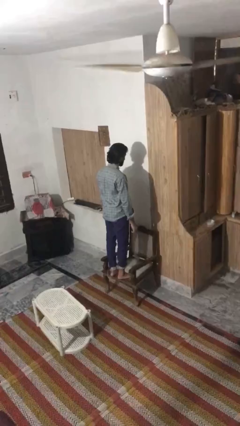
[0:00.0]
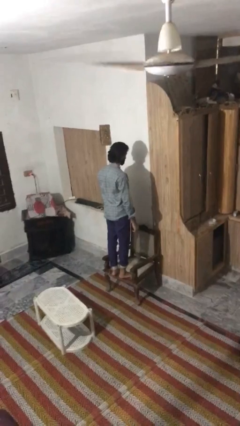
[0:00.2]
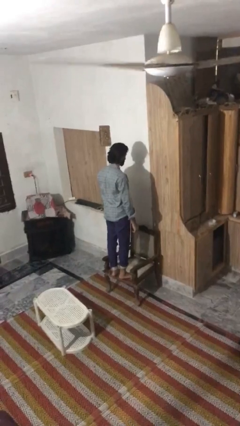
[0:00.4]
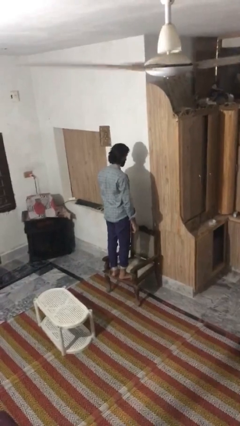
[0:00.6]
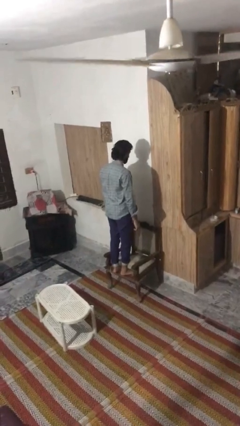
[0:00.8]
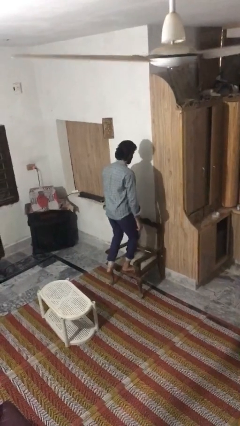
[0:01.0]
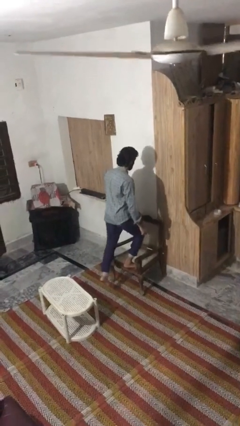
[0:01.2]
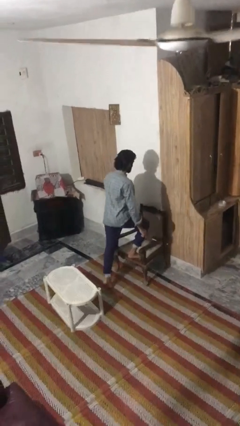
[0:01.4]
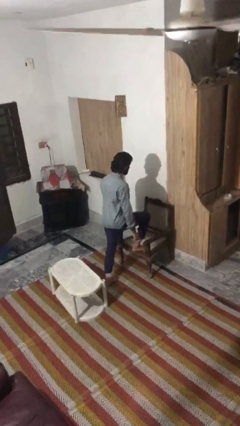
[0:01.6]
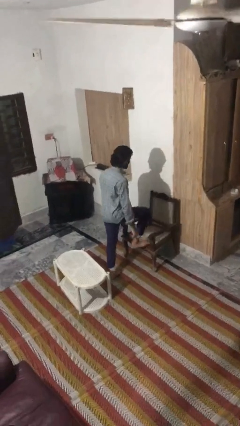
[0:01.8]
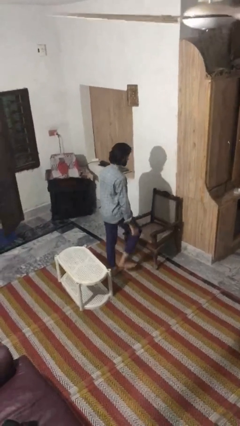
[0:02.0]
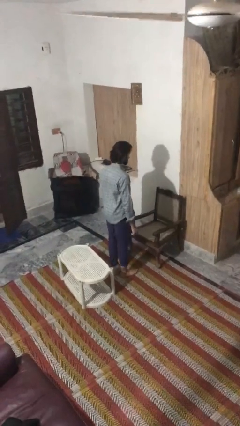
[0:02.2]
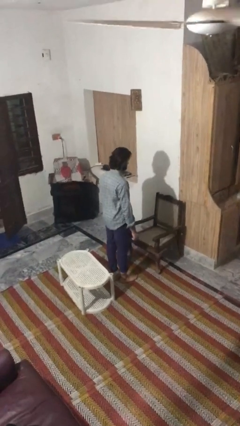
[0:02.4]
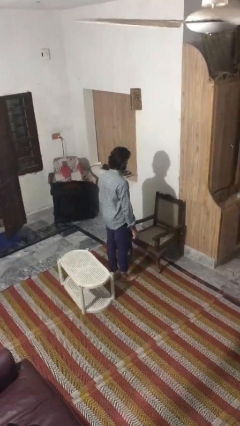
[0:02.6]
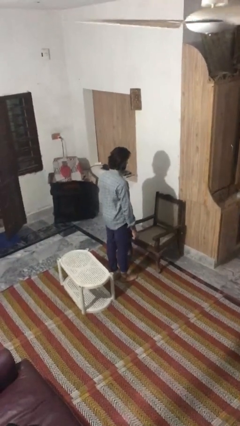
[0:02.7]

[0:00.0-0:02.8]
person climbs off chair

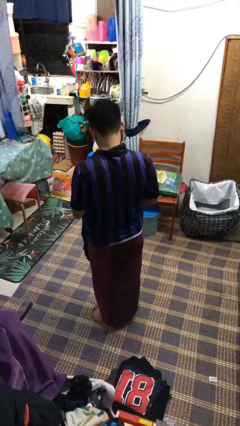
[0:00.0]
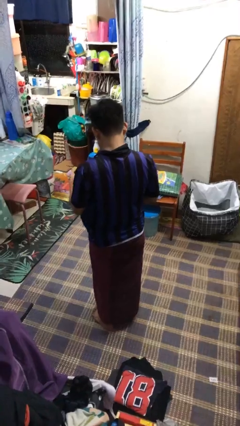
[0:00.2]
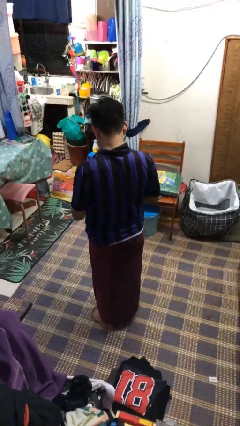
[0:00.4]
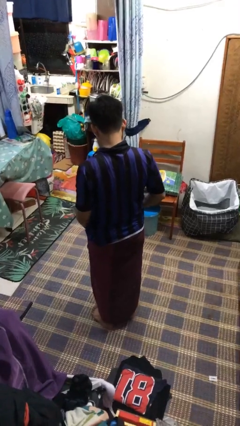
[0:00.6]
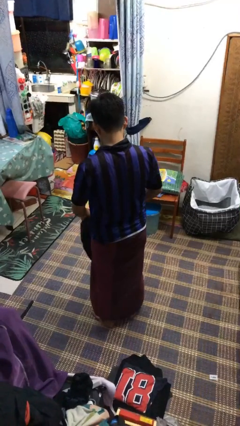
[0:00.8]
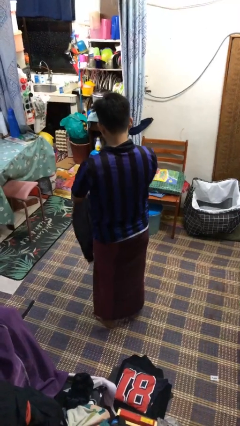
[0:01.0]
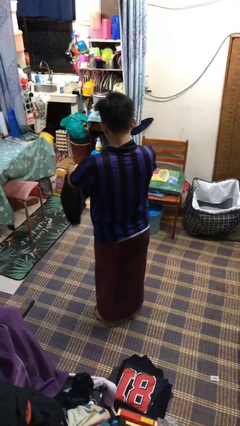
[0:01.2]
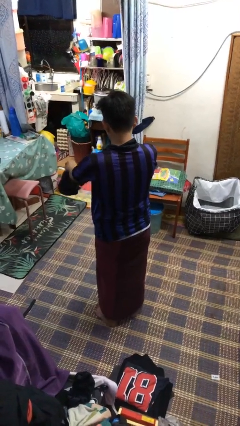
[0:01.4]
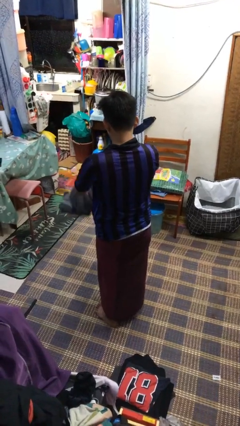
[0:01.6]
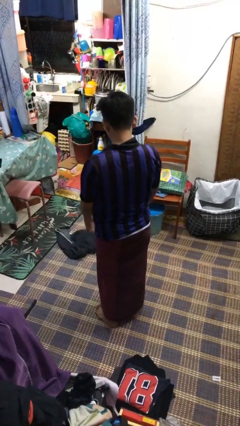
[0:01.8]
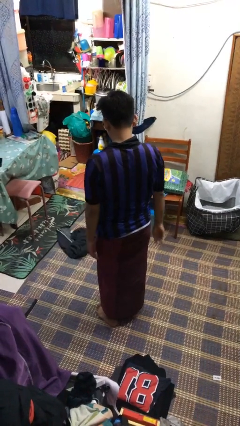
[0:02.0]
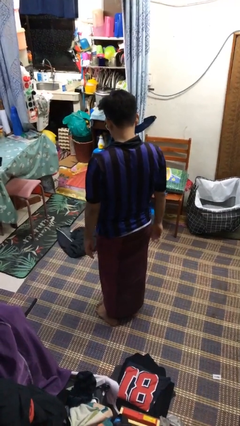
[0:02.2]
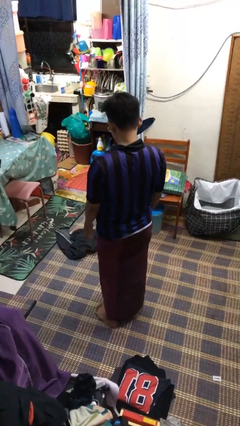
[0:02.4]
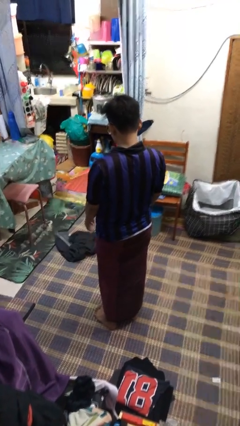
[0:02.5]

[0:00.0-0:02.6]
person throws object to ground

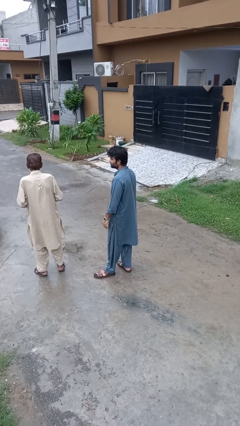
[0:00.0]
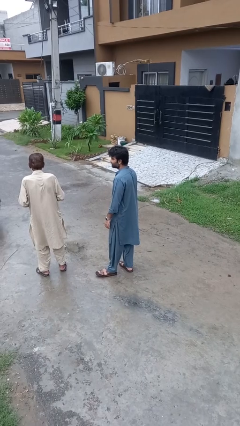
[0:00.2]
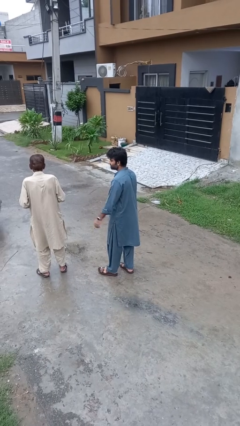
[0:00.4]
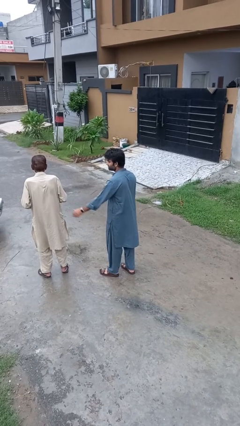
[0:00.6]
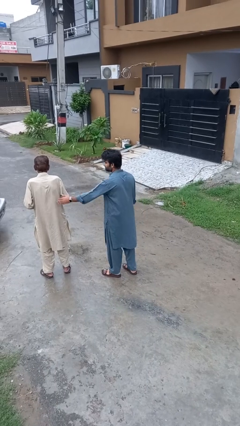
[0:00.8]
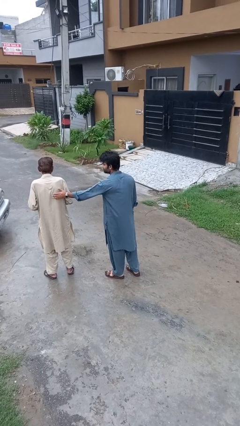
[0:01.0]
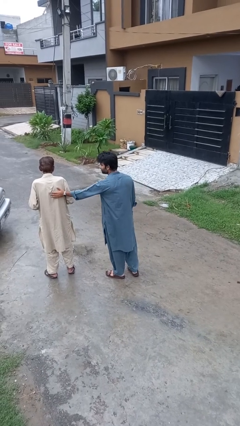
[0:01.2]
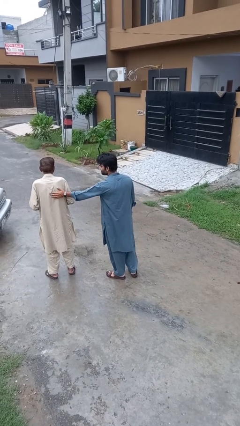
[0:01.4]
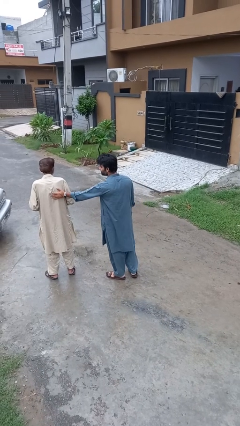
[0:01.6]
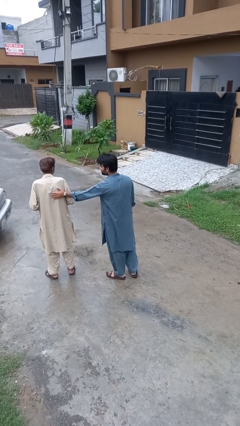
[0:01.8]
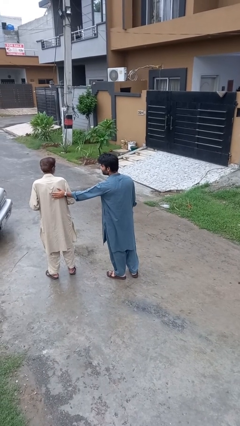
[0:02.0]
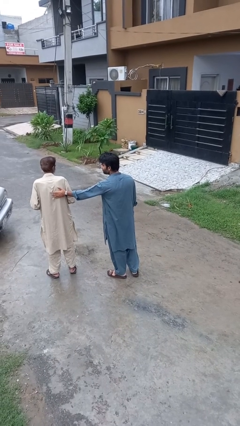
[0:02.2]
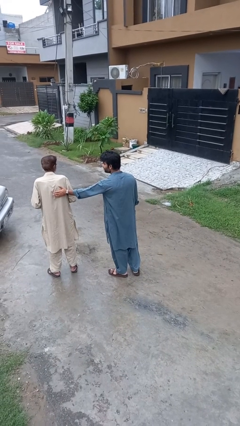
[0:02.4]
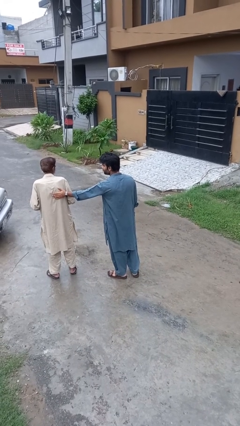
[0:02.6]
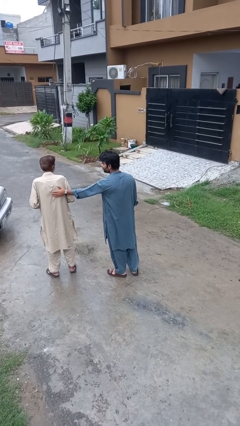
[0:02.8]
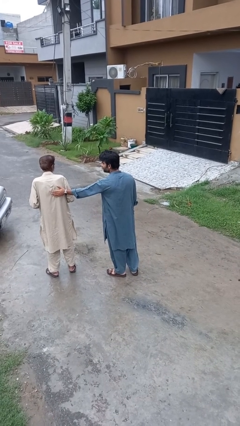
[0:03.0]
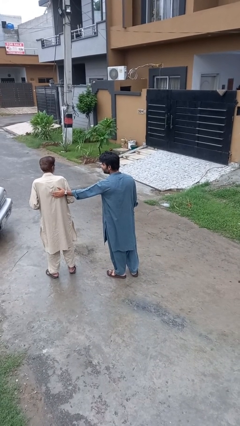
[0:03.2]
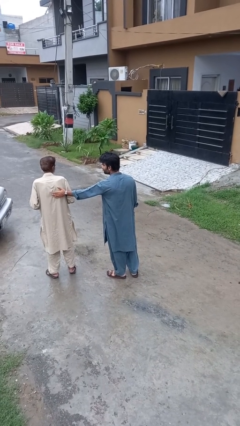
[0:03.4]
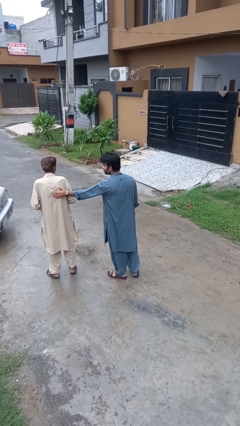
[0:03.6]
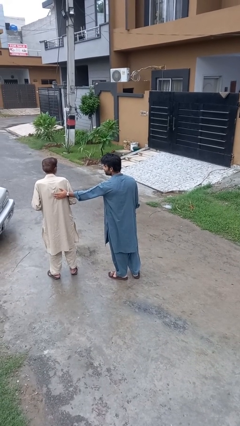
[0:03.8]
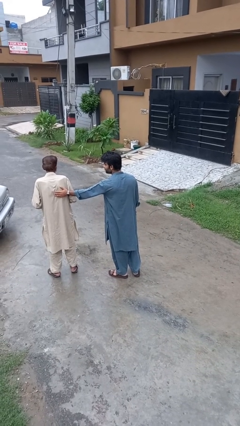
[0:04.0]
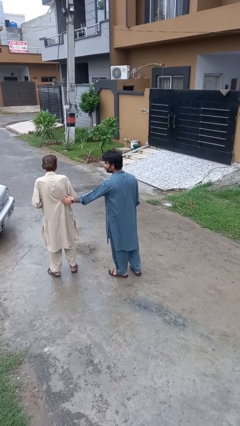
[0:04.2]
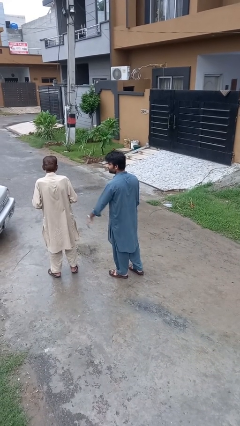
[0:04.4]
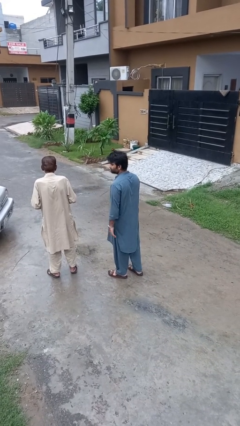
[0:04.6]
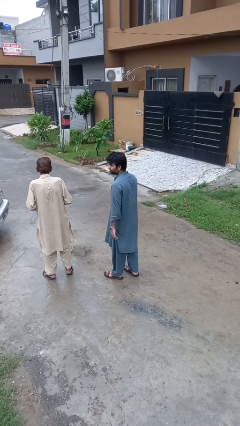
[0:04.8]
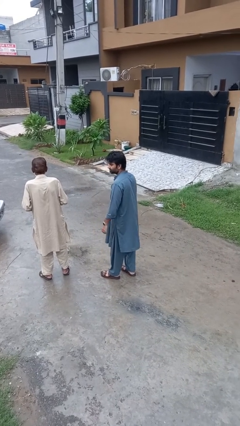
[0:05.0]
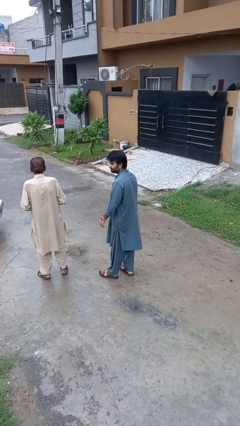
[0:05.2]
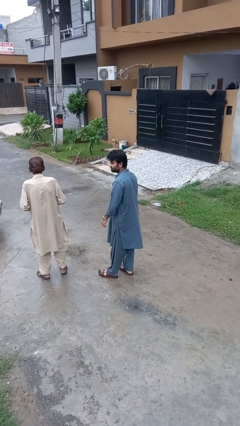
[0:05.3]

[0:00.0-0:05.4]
person touches back of person

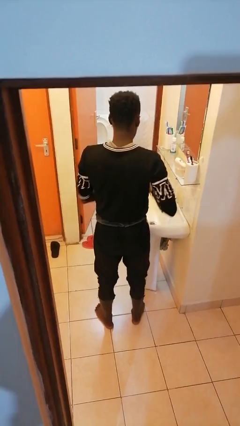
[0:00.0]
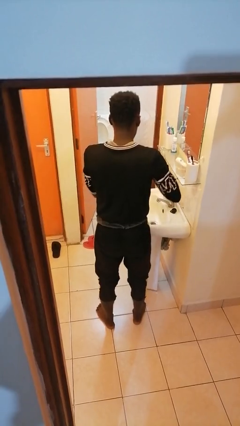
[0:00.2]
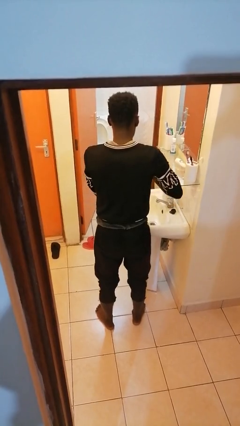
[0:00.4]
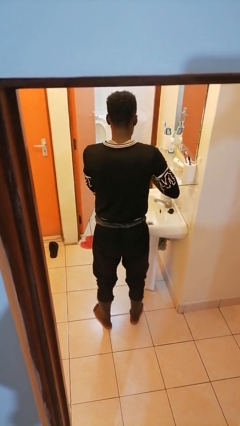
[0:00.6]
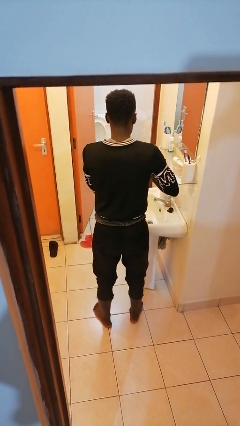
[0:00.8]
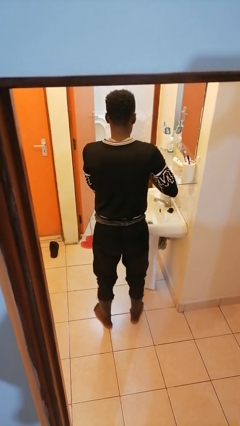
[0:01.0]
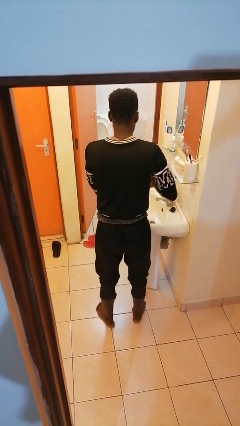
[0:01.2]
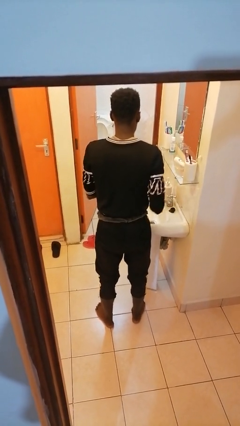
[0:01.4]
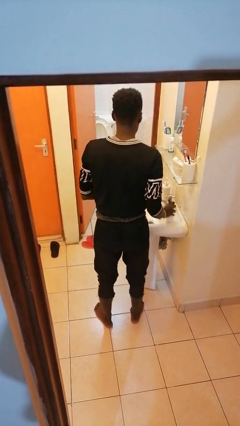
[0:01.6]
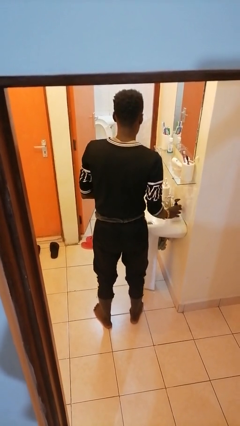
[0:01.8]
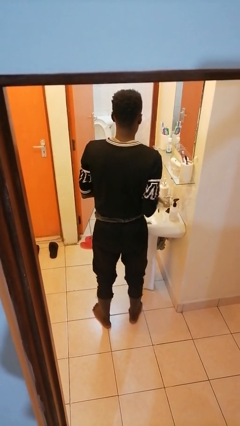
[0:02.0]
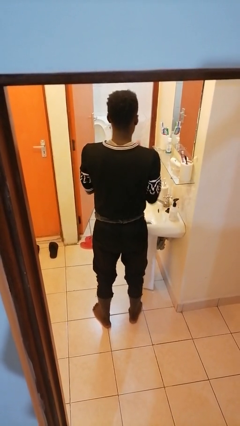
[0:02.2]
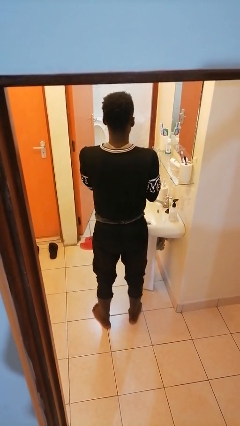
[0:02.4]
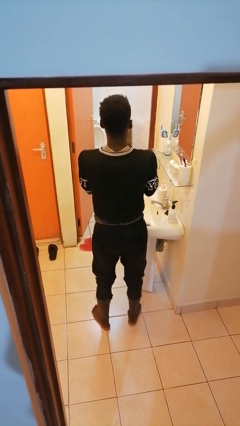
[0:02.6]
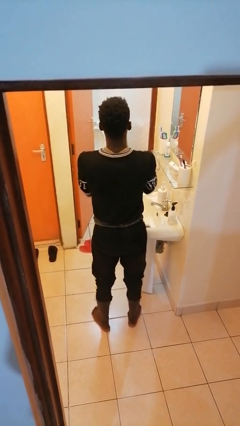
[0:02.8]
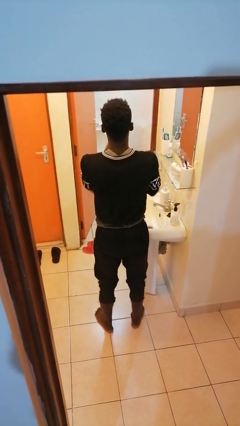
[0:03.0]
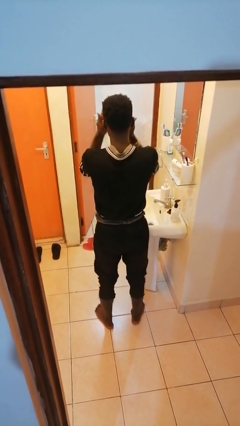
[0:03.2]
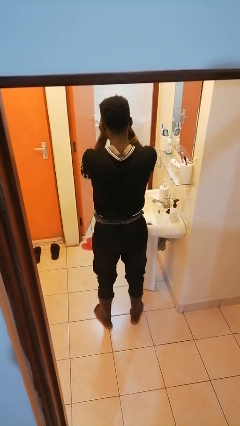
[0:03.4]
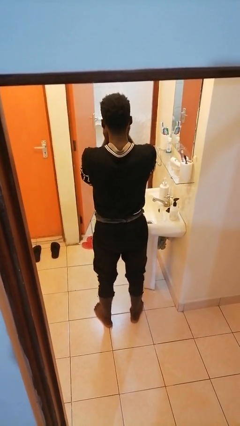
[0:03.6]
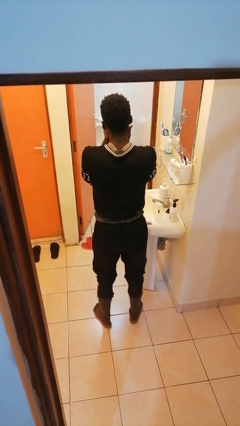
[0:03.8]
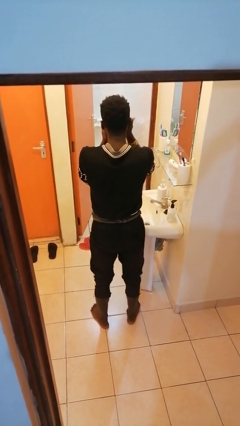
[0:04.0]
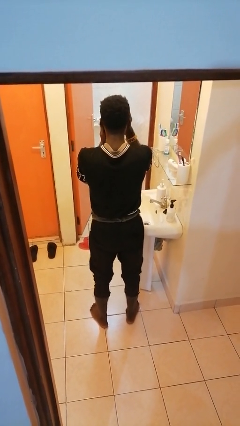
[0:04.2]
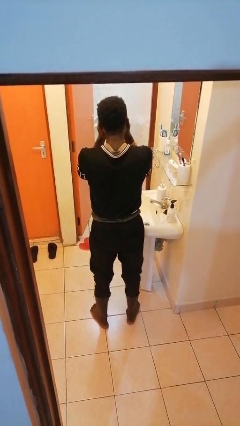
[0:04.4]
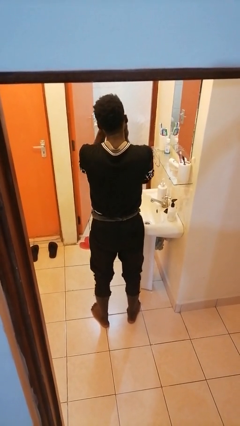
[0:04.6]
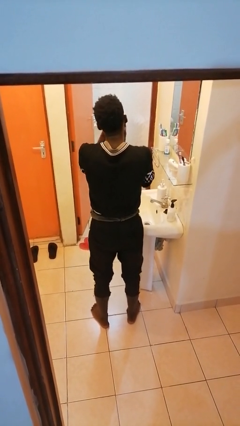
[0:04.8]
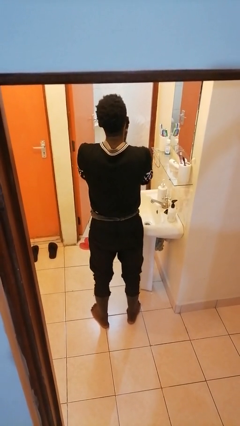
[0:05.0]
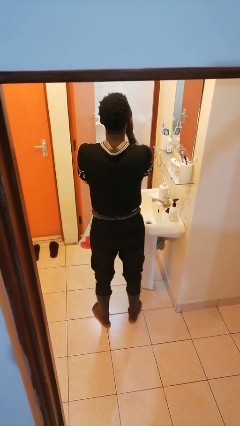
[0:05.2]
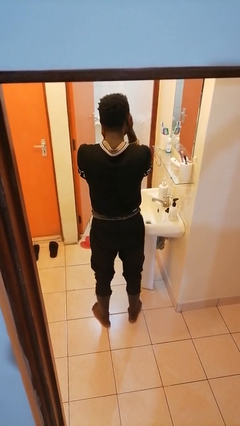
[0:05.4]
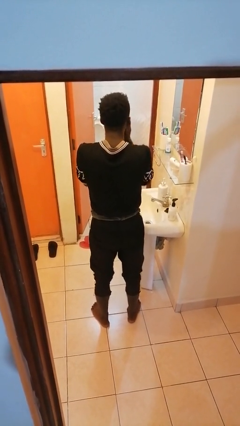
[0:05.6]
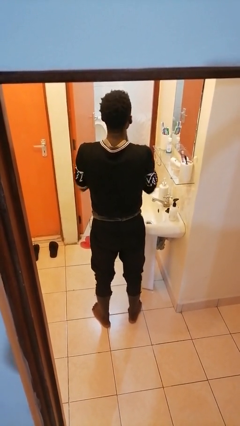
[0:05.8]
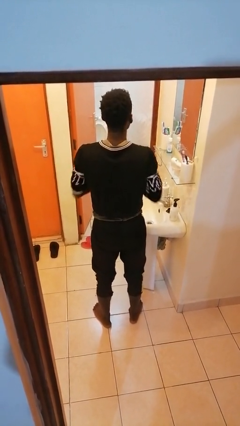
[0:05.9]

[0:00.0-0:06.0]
person applies facial moisturizer

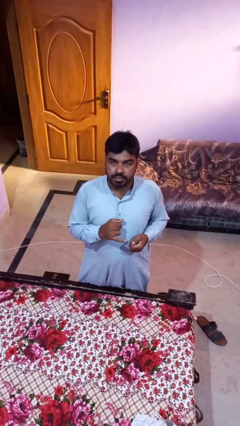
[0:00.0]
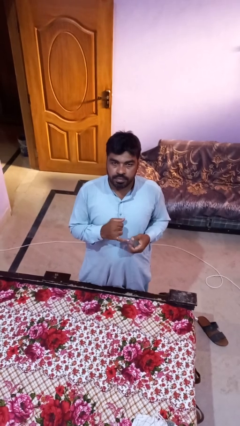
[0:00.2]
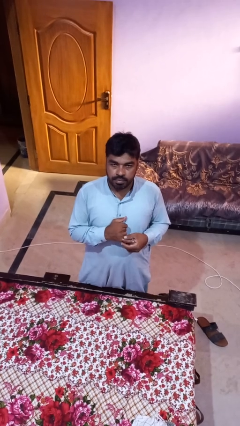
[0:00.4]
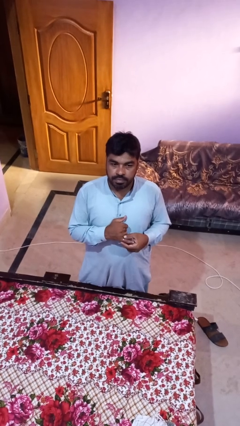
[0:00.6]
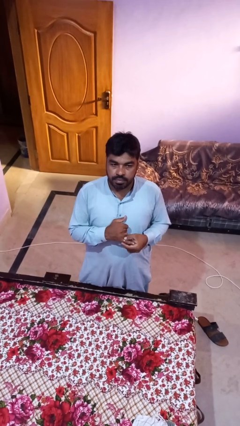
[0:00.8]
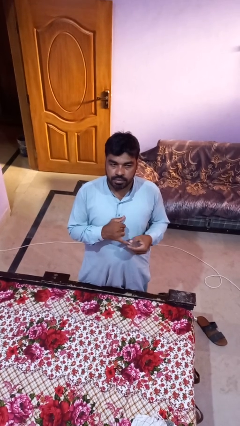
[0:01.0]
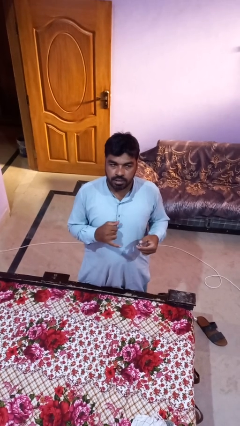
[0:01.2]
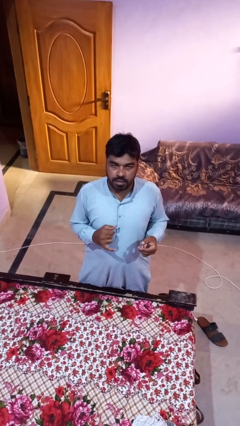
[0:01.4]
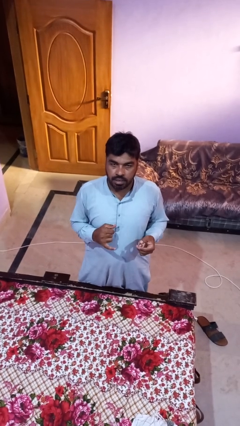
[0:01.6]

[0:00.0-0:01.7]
person takes off ring
